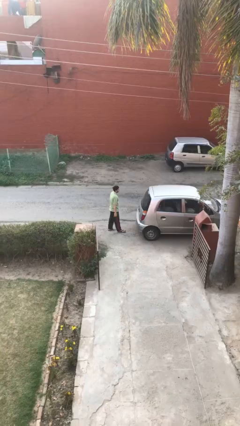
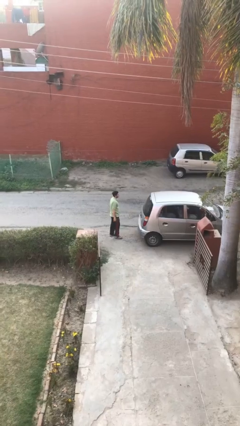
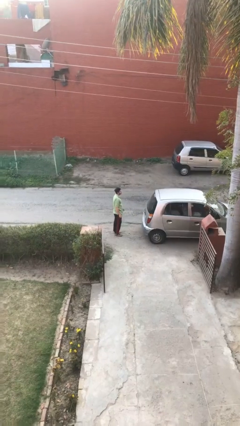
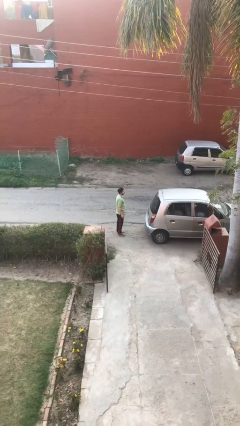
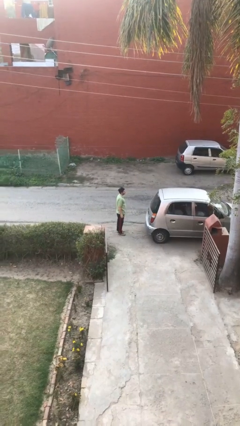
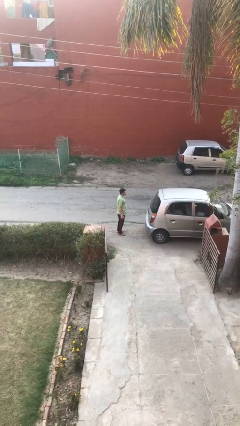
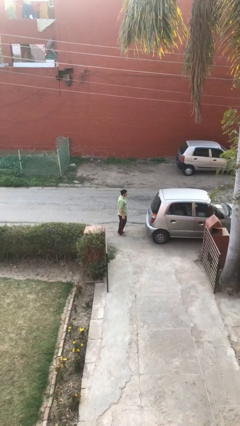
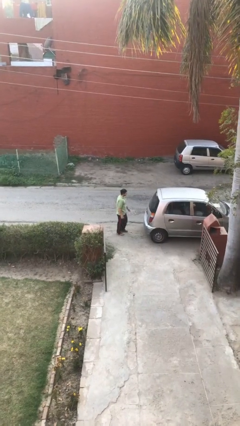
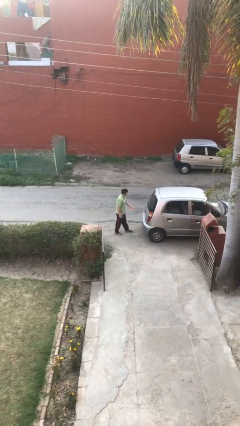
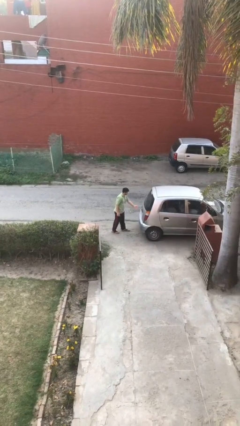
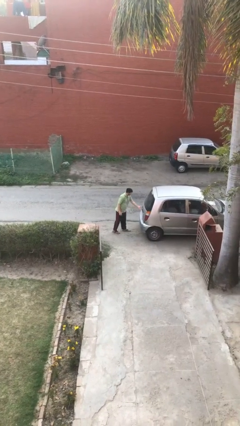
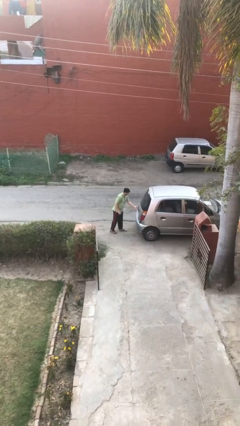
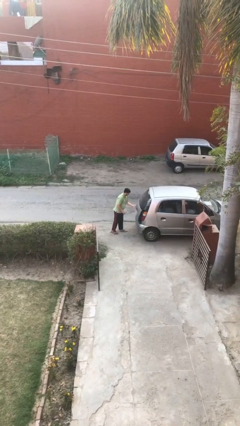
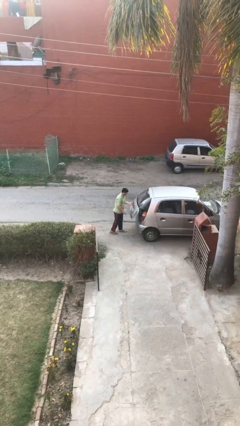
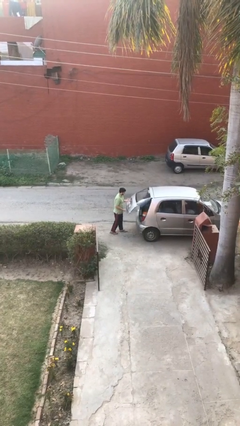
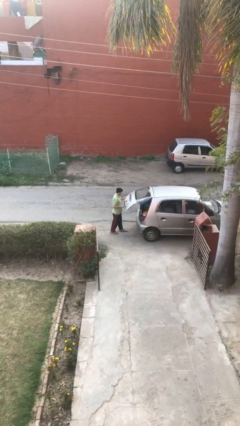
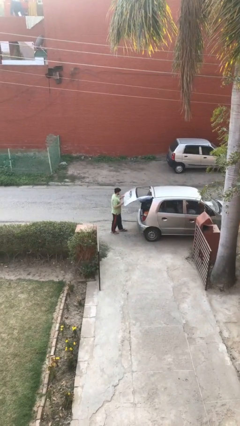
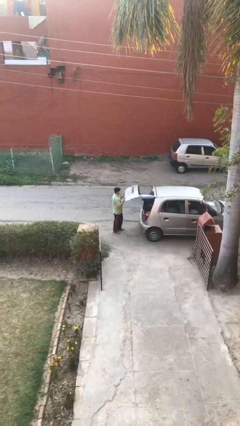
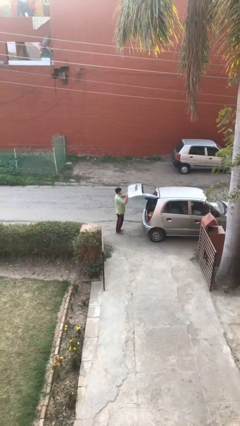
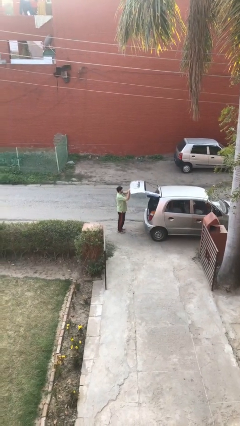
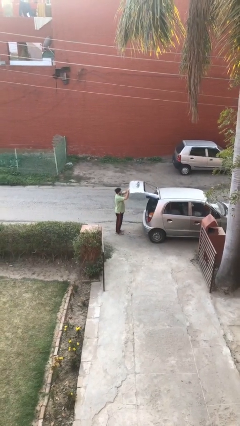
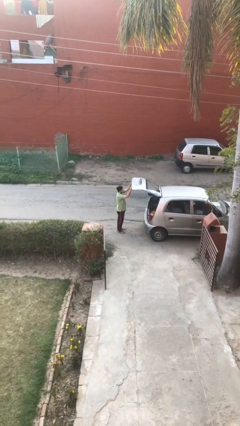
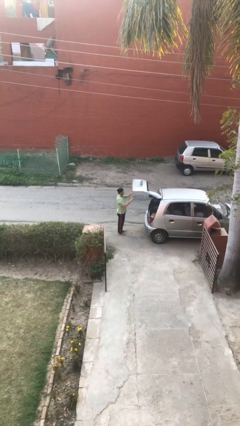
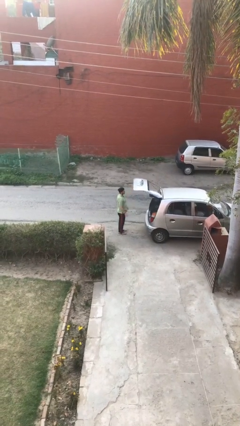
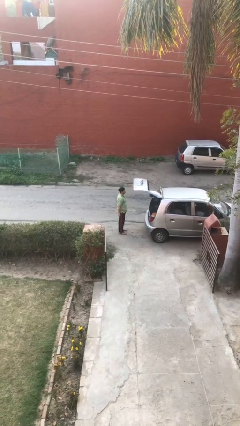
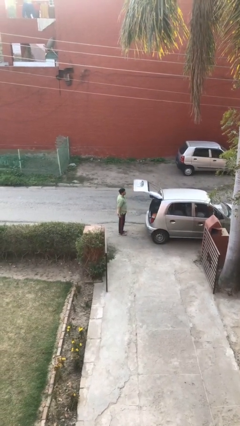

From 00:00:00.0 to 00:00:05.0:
person opens car trunk

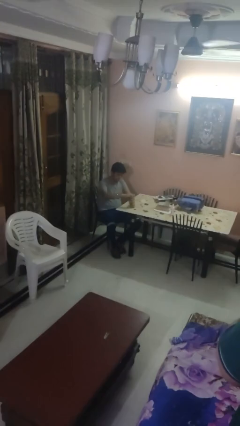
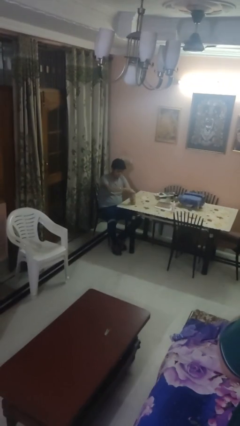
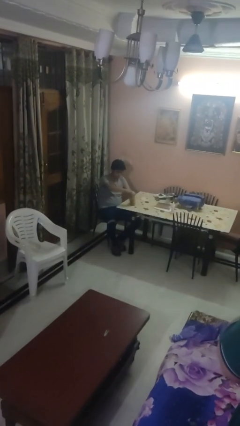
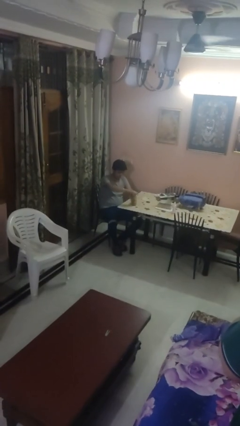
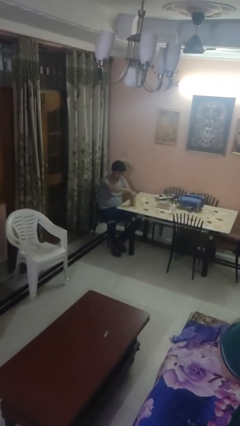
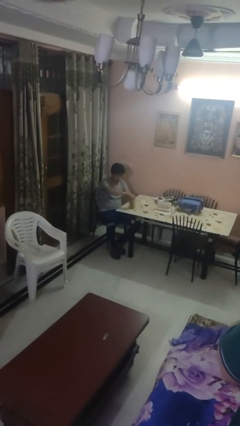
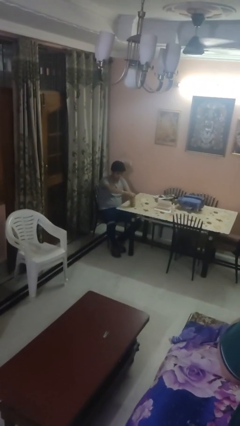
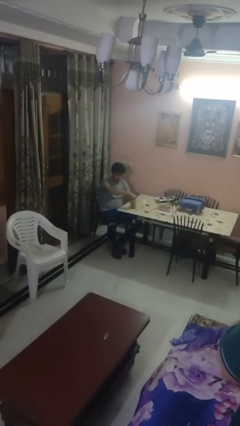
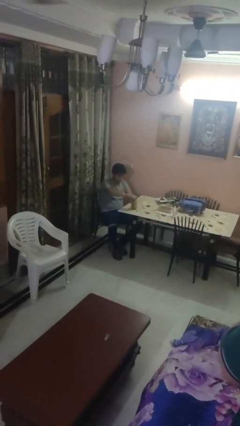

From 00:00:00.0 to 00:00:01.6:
person screws lid to bottle

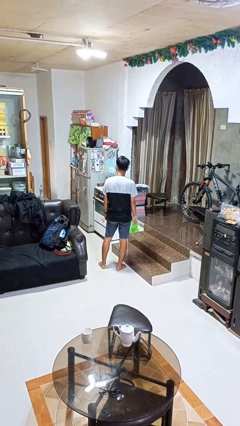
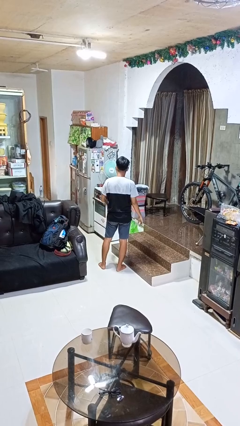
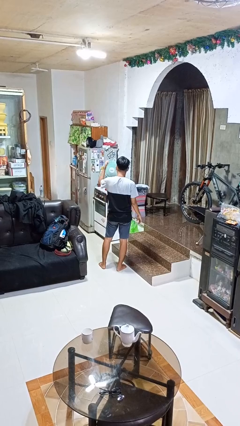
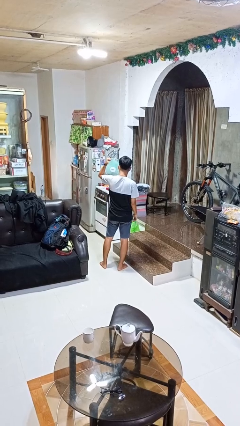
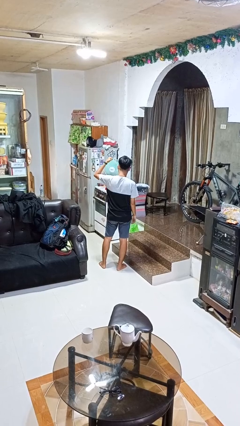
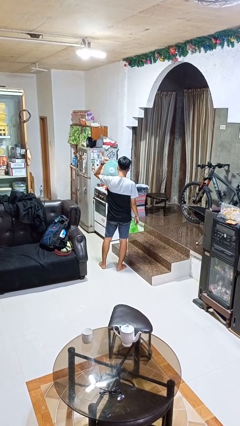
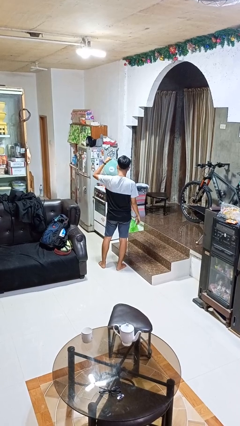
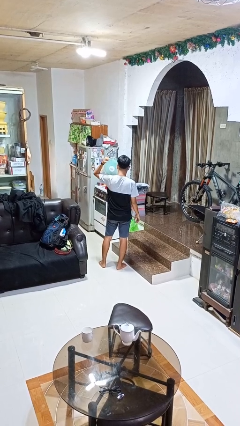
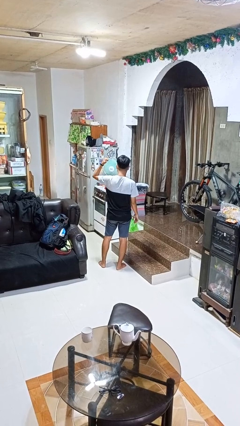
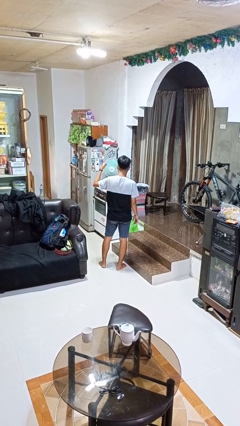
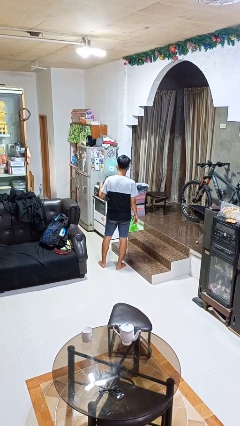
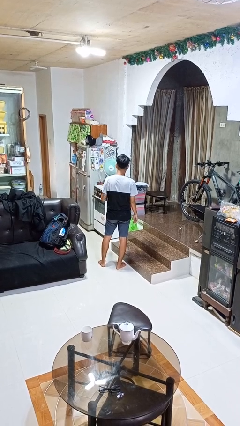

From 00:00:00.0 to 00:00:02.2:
person gestures behind me

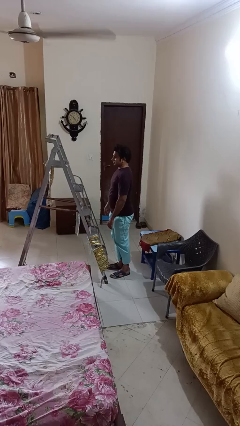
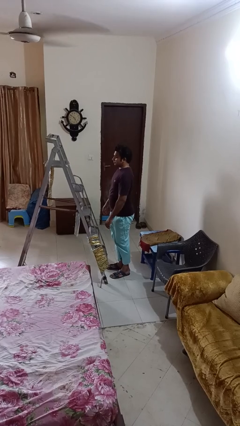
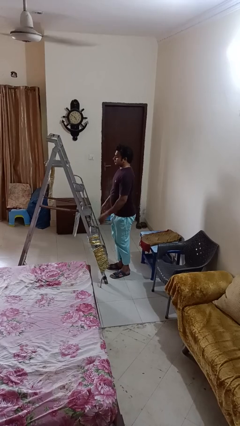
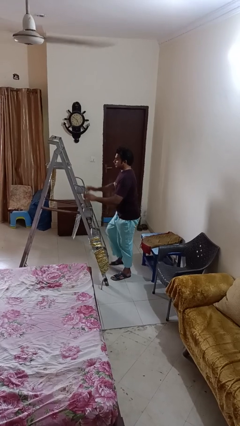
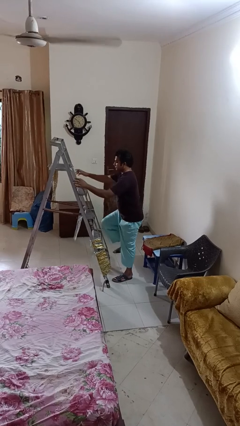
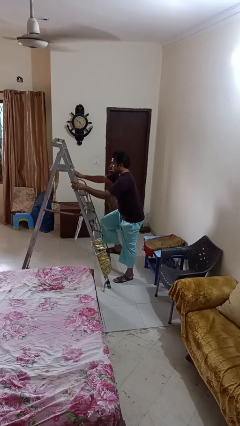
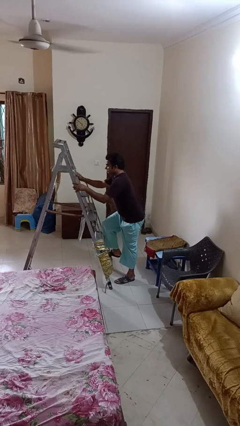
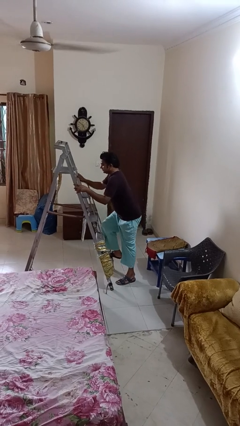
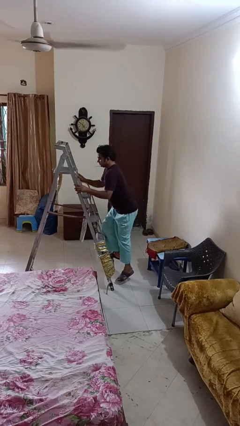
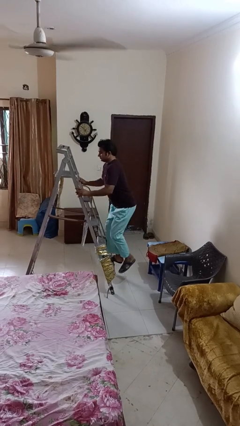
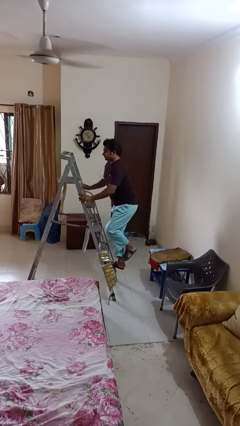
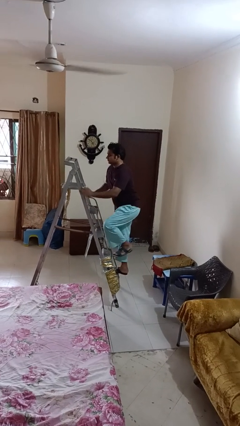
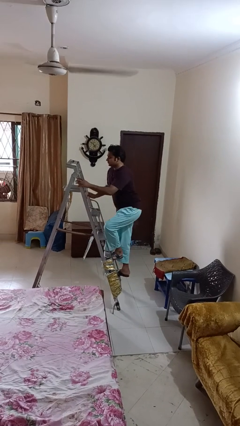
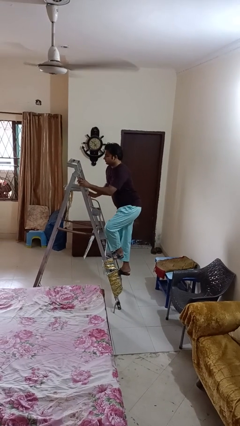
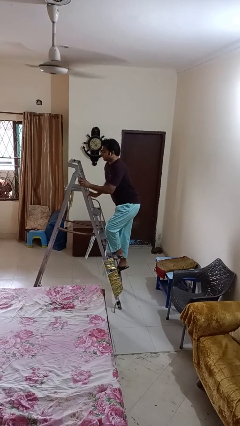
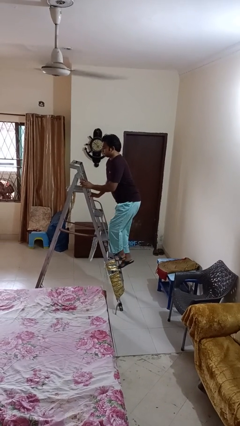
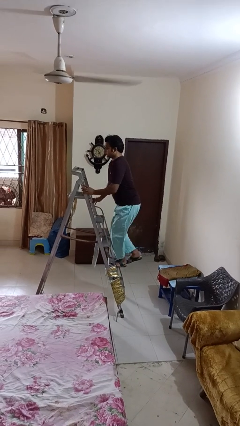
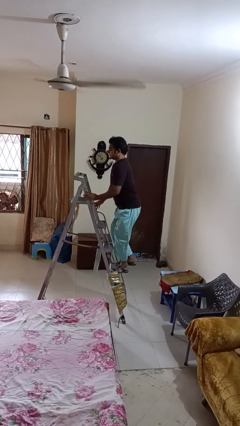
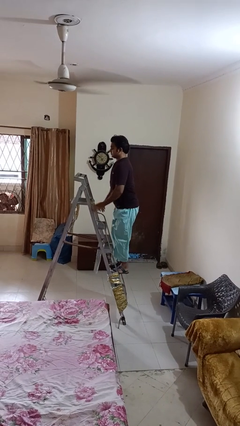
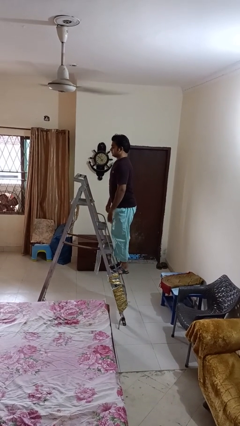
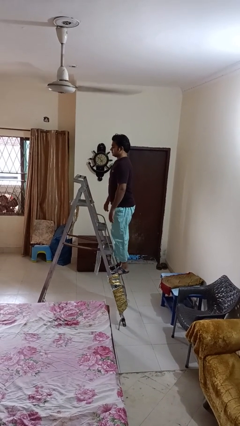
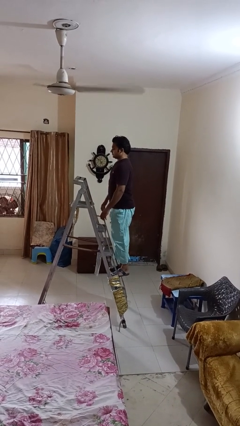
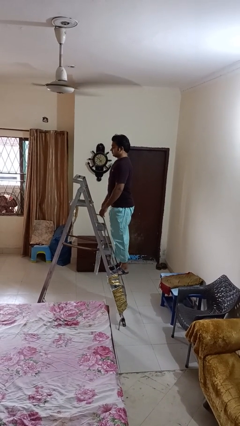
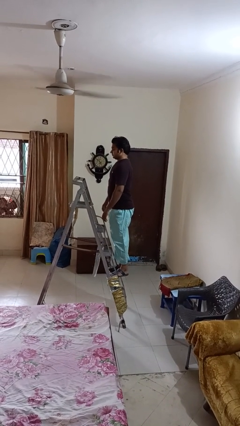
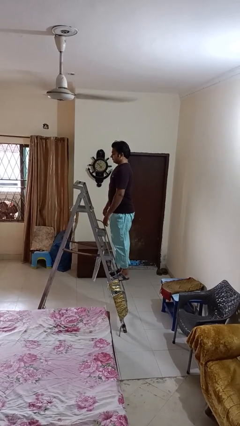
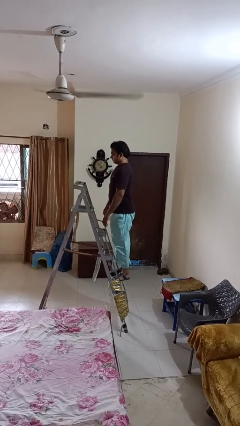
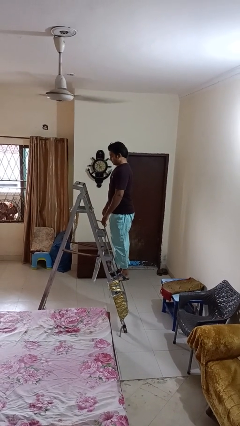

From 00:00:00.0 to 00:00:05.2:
person climbs up ladder

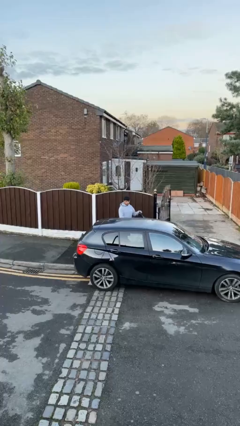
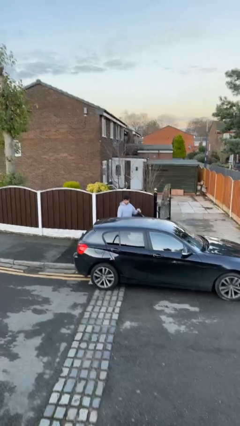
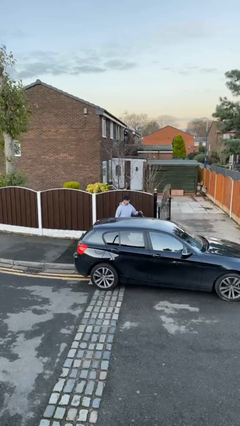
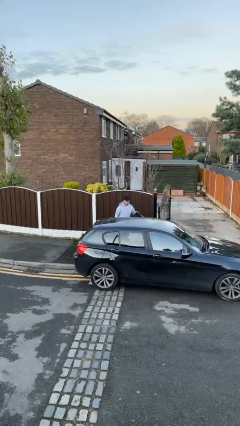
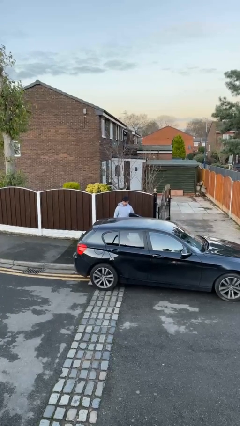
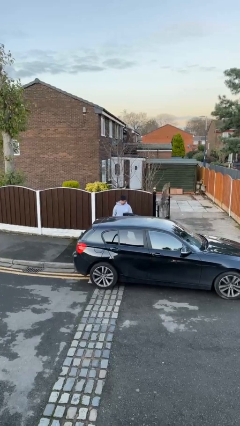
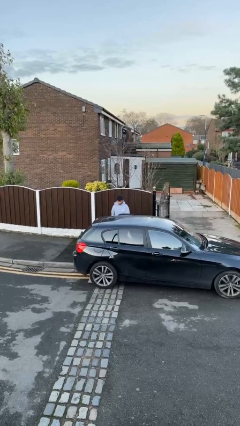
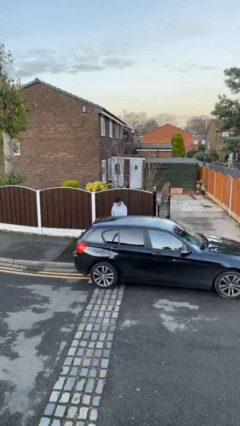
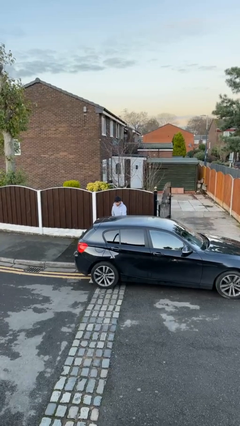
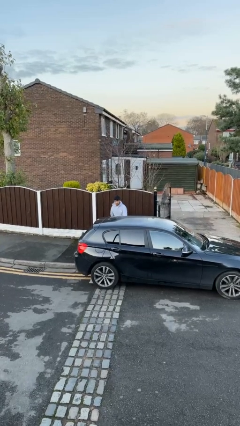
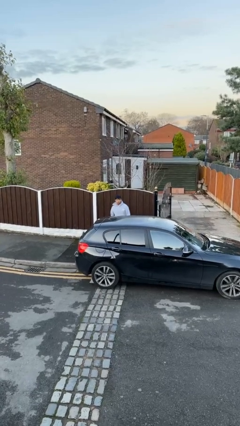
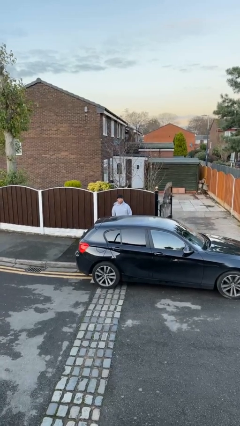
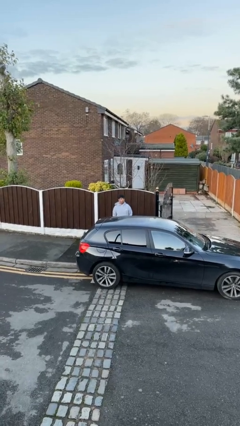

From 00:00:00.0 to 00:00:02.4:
person closes car door

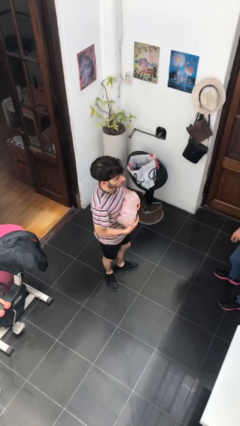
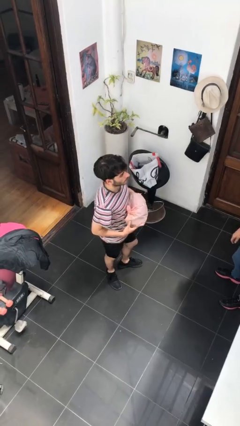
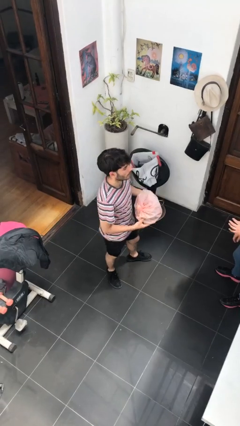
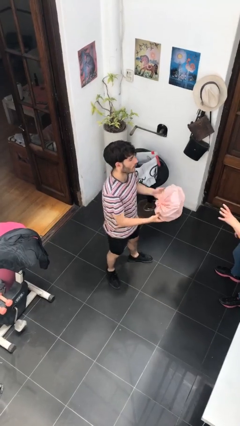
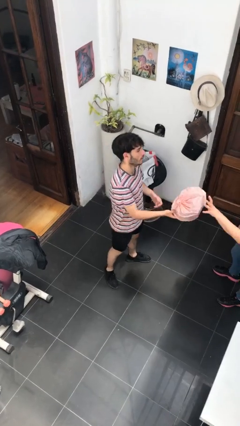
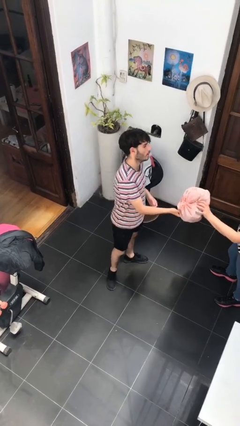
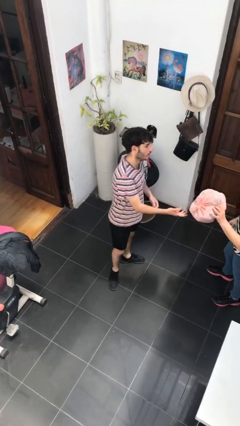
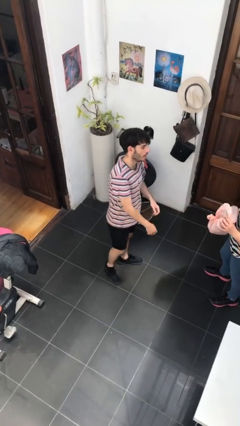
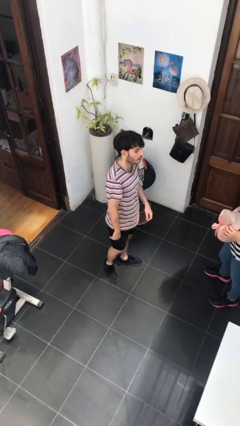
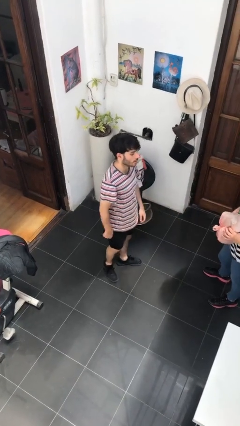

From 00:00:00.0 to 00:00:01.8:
person transfers object to person
